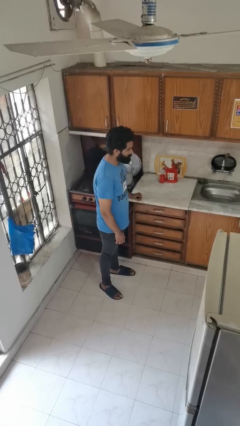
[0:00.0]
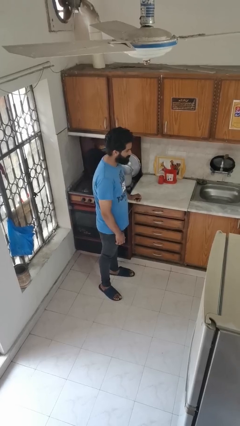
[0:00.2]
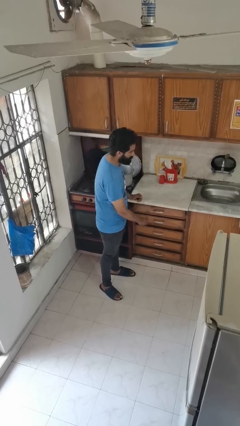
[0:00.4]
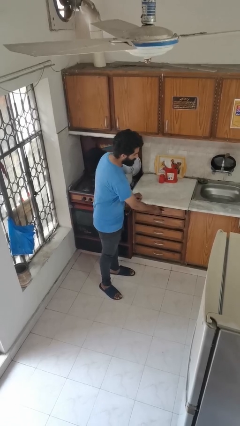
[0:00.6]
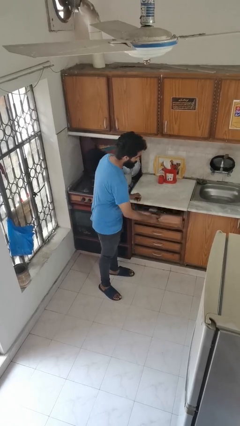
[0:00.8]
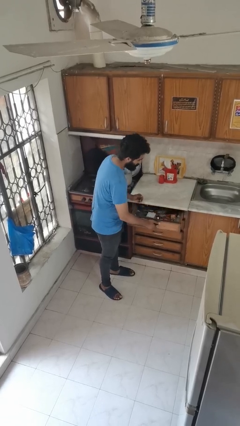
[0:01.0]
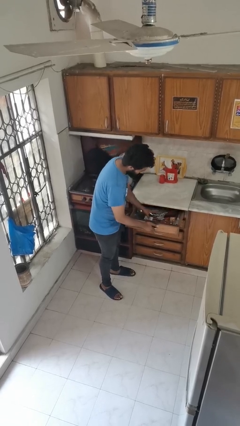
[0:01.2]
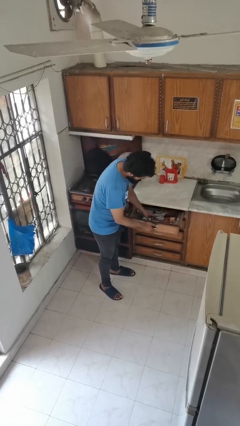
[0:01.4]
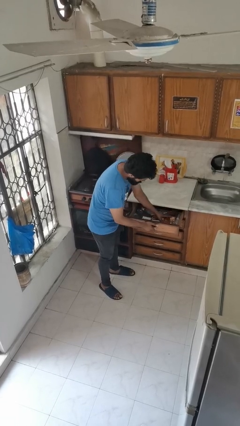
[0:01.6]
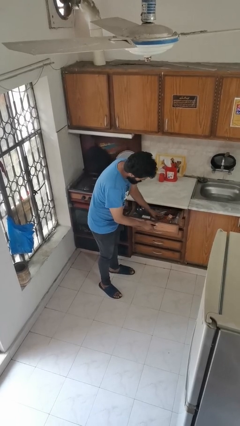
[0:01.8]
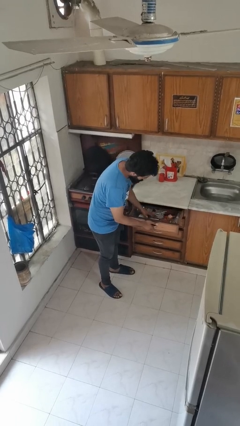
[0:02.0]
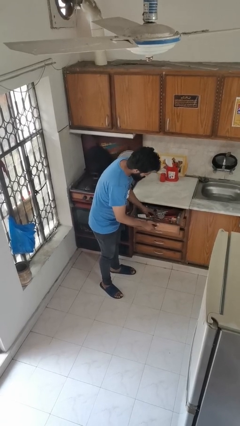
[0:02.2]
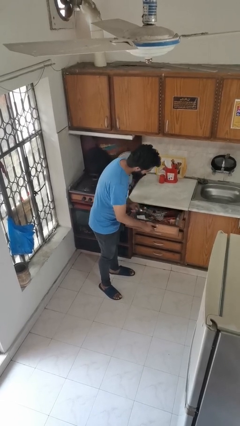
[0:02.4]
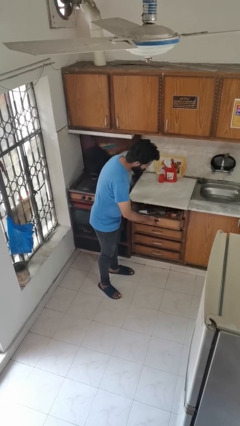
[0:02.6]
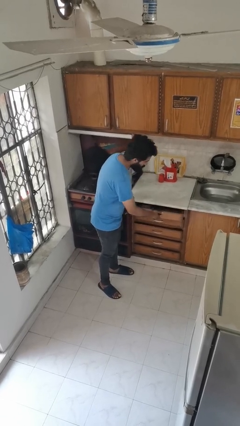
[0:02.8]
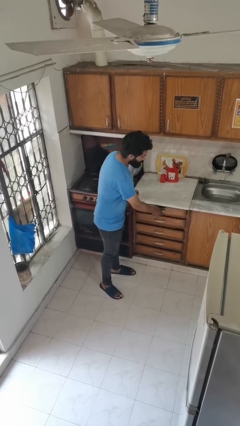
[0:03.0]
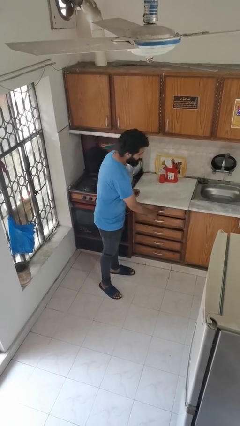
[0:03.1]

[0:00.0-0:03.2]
person searches in kitchen drawer

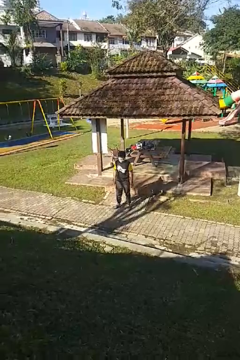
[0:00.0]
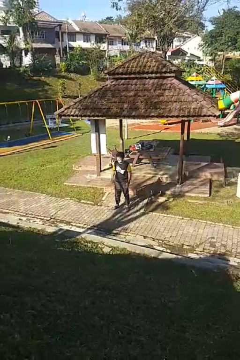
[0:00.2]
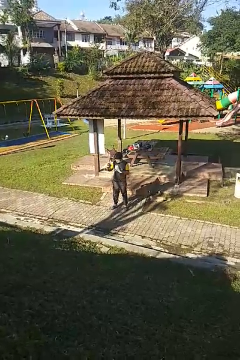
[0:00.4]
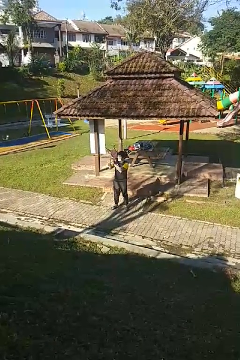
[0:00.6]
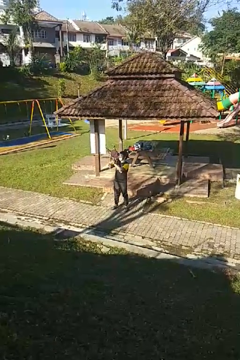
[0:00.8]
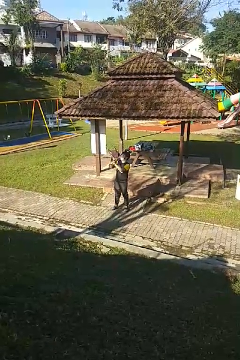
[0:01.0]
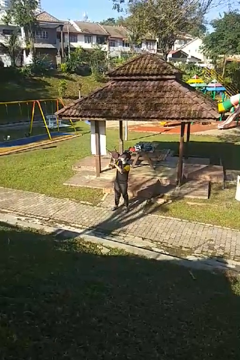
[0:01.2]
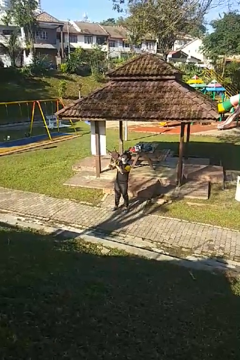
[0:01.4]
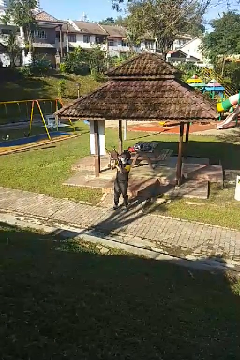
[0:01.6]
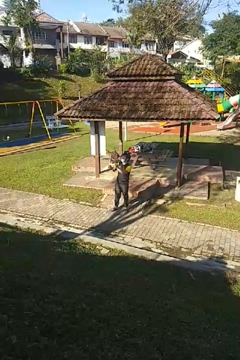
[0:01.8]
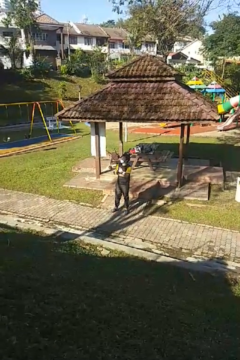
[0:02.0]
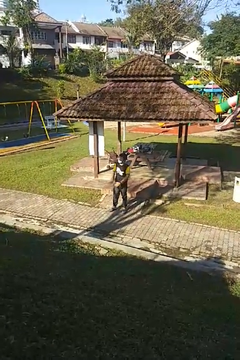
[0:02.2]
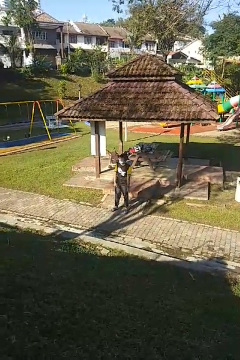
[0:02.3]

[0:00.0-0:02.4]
person claps hands

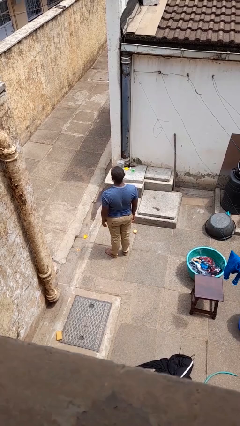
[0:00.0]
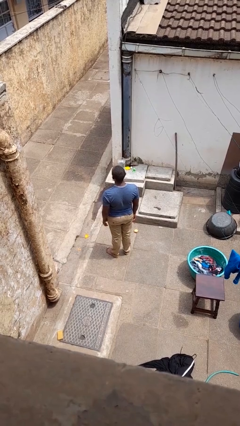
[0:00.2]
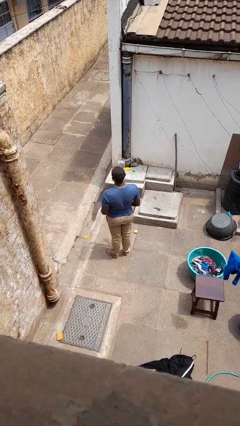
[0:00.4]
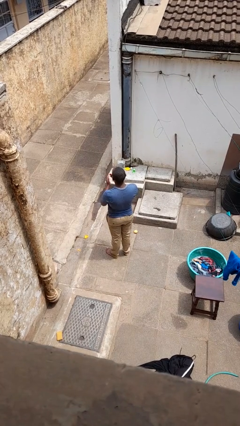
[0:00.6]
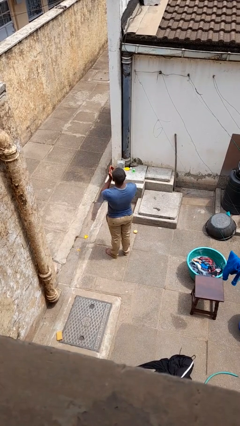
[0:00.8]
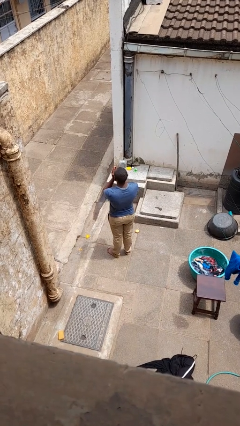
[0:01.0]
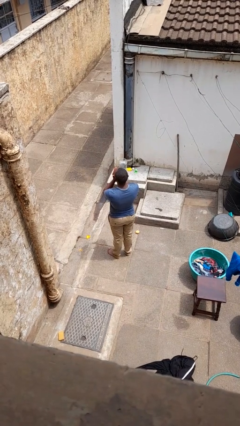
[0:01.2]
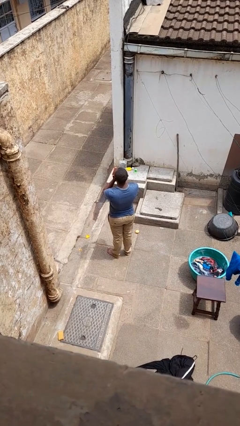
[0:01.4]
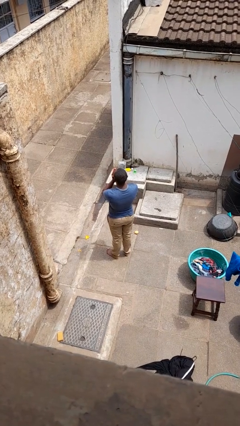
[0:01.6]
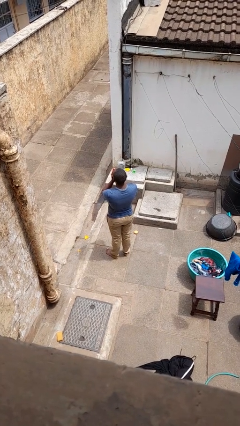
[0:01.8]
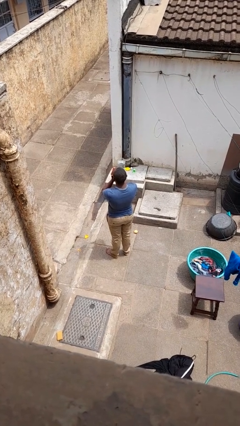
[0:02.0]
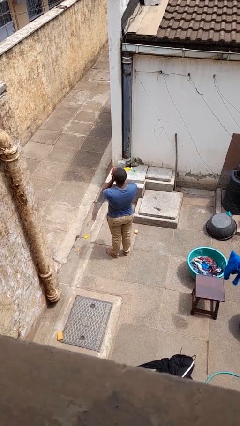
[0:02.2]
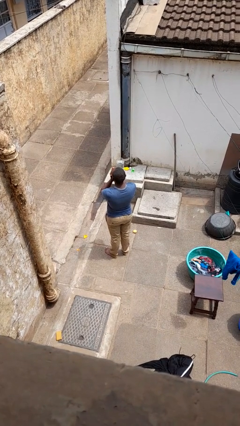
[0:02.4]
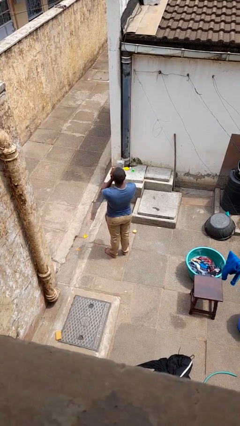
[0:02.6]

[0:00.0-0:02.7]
person blows into hands

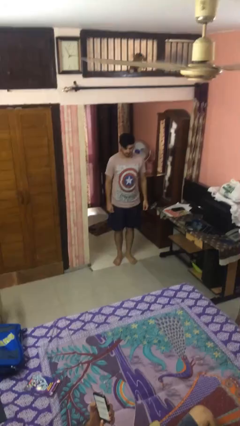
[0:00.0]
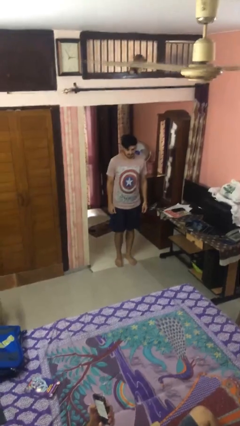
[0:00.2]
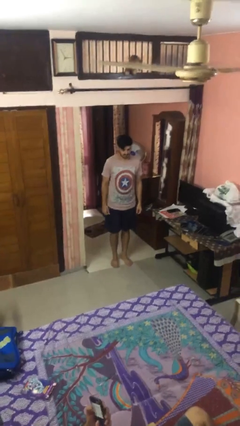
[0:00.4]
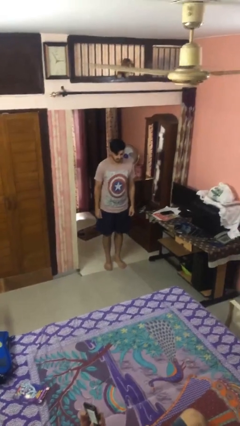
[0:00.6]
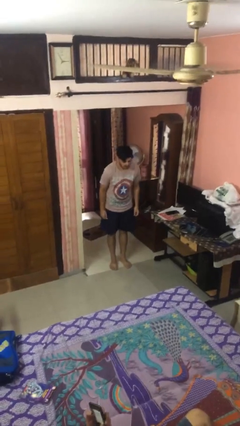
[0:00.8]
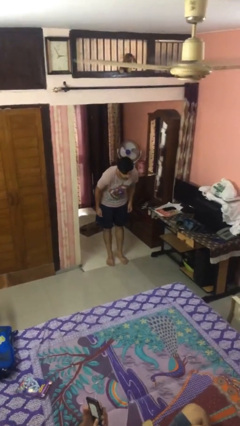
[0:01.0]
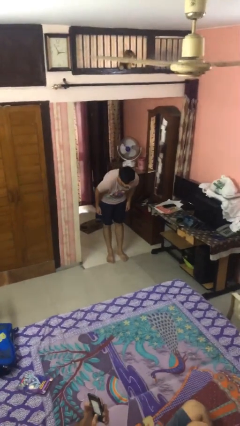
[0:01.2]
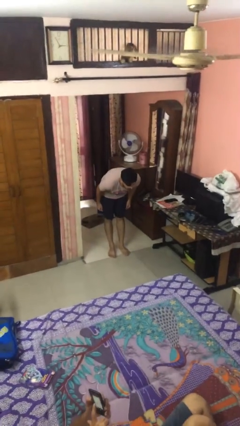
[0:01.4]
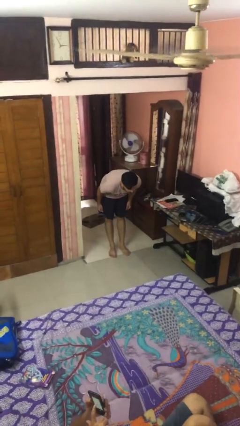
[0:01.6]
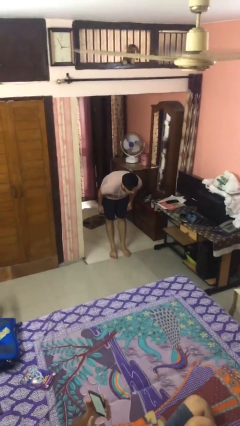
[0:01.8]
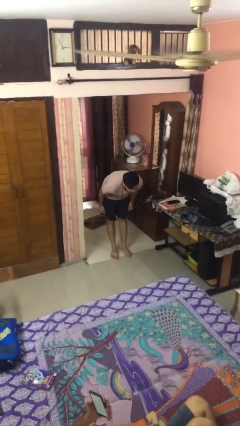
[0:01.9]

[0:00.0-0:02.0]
person bows

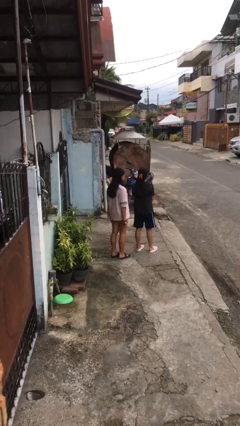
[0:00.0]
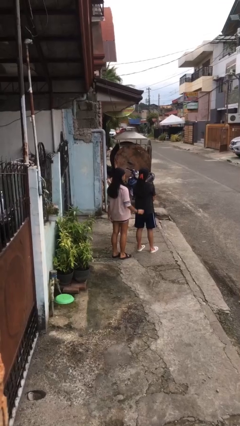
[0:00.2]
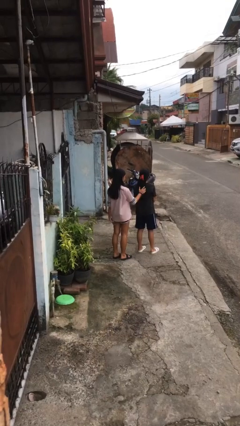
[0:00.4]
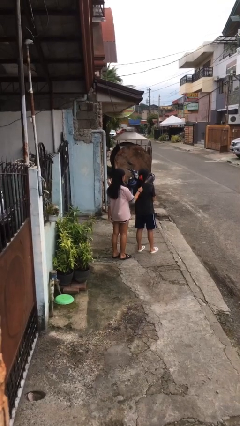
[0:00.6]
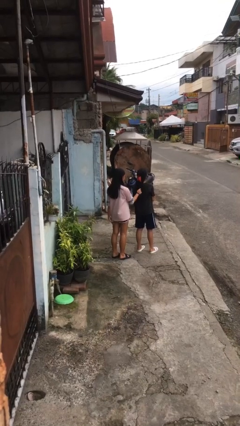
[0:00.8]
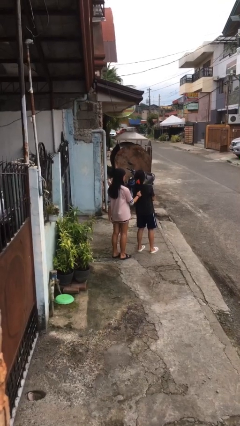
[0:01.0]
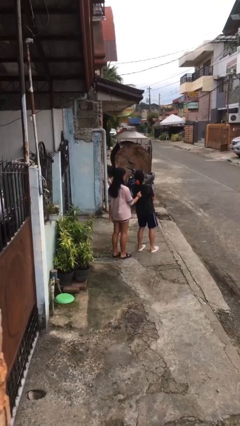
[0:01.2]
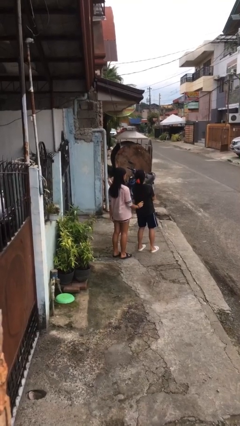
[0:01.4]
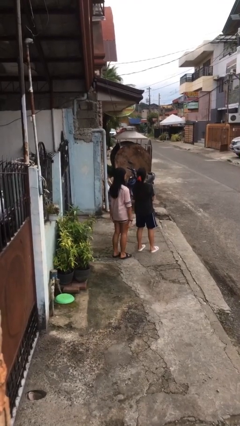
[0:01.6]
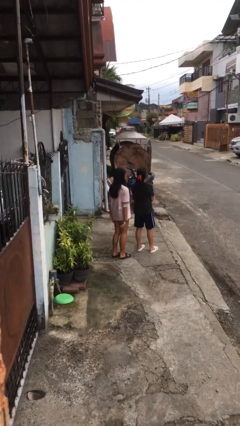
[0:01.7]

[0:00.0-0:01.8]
person grabs person by hair

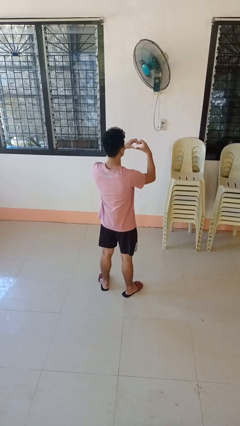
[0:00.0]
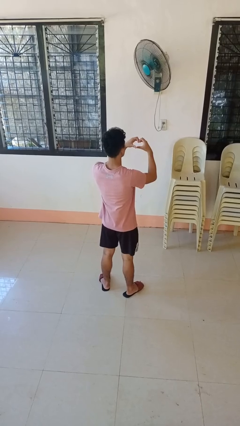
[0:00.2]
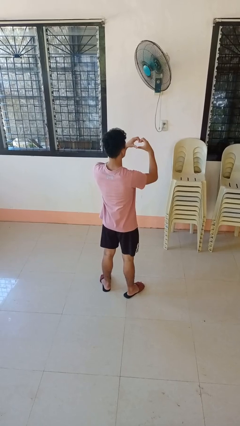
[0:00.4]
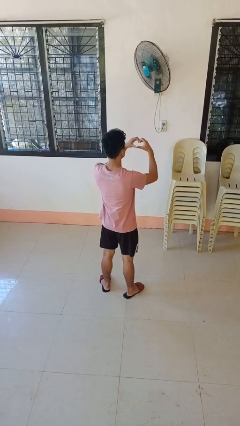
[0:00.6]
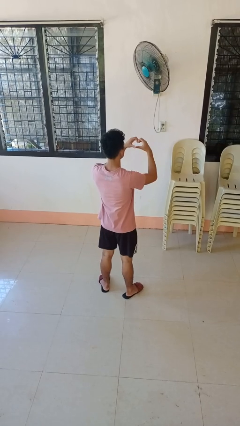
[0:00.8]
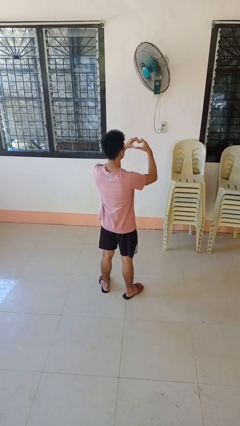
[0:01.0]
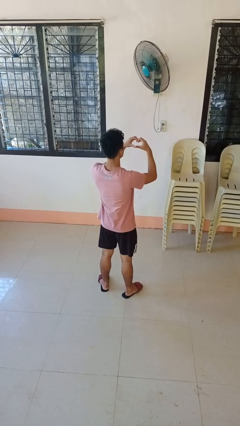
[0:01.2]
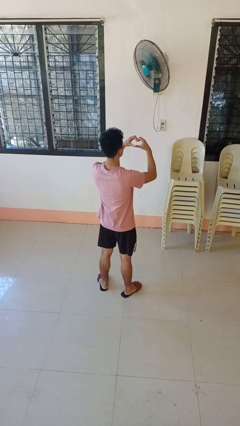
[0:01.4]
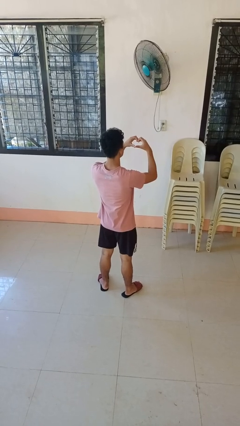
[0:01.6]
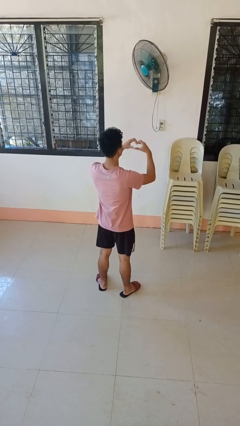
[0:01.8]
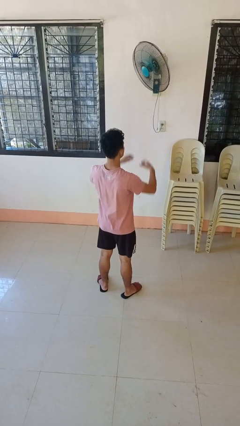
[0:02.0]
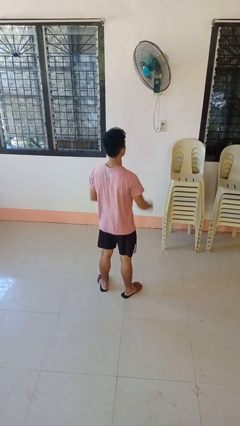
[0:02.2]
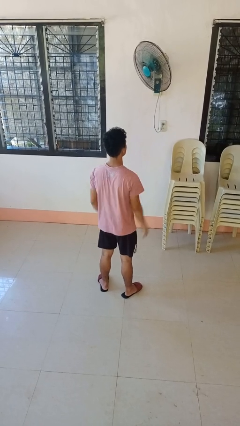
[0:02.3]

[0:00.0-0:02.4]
person gestures heart

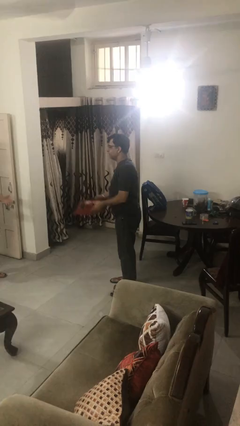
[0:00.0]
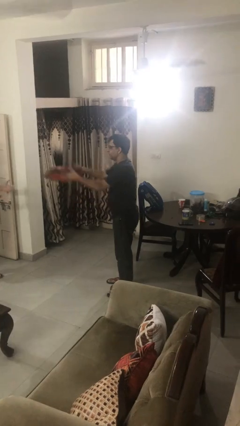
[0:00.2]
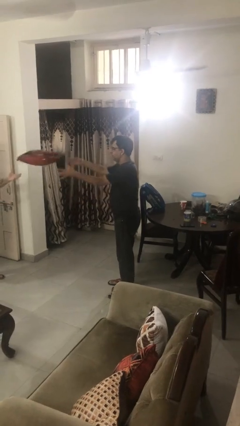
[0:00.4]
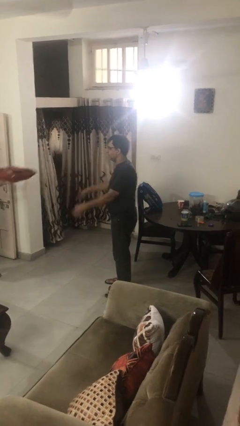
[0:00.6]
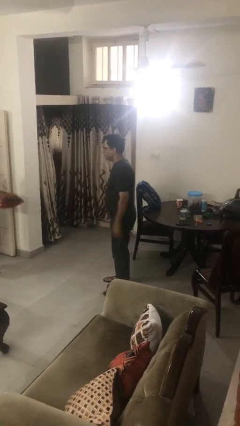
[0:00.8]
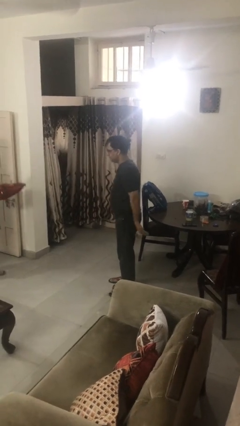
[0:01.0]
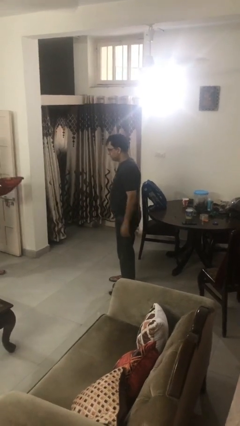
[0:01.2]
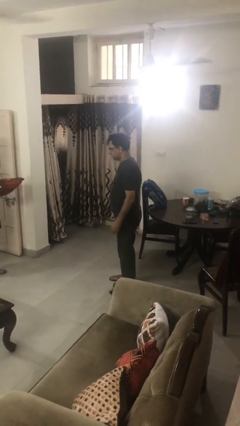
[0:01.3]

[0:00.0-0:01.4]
person throws object to person

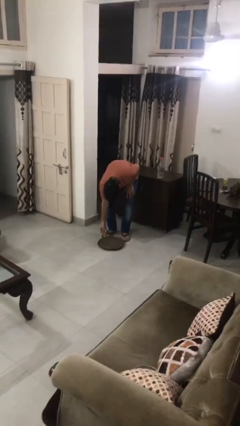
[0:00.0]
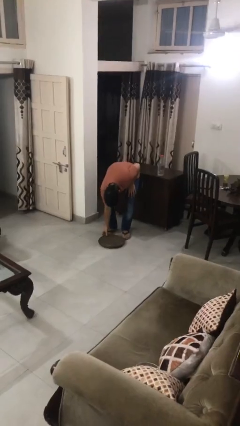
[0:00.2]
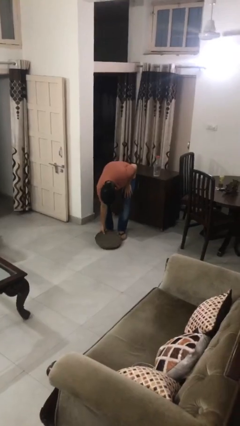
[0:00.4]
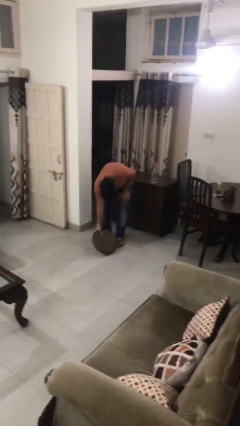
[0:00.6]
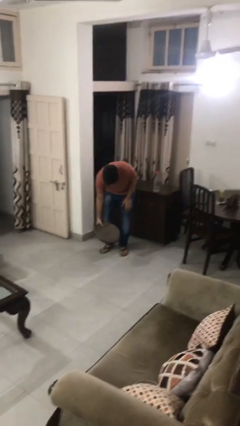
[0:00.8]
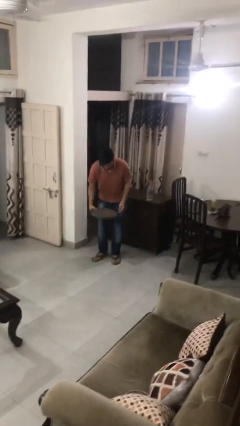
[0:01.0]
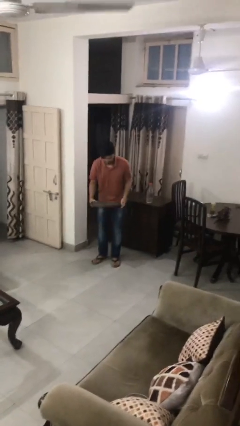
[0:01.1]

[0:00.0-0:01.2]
person picks up object from floor

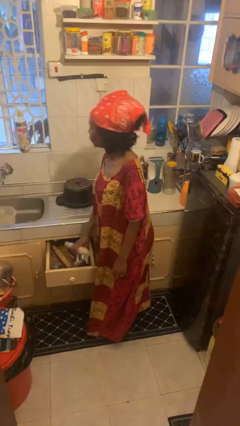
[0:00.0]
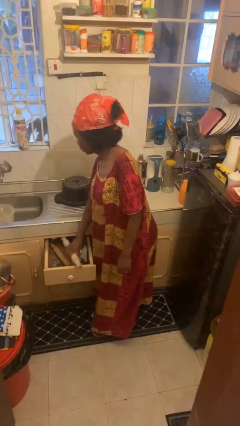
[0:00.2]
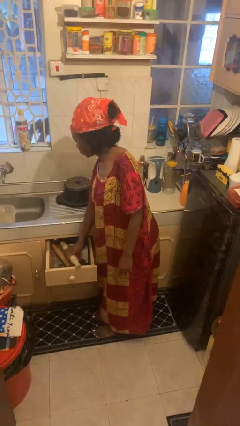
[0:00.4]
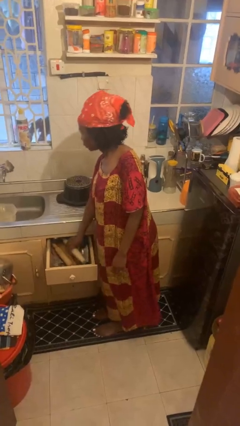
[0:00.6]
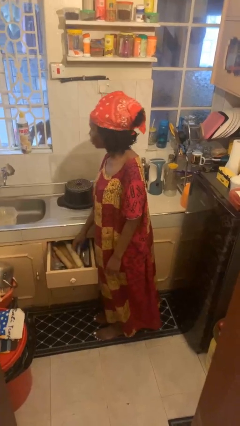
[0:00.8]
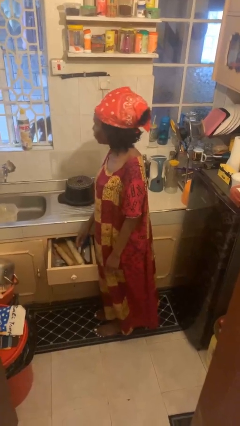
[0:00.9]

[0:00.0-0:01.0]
person puts object into kitchen drawer
